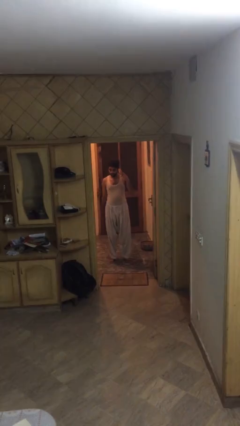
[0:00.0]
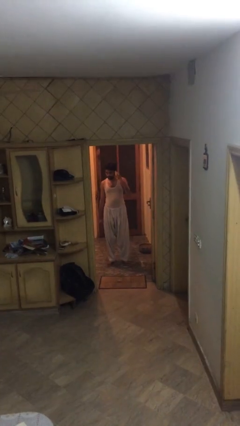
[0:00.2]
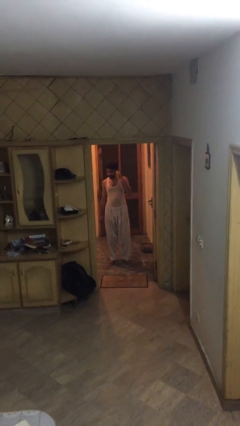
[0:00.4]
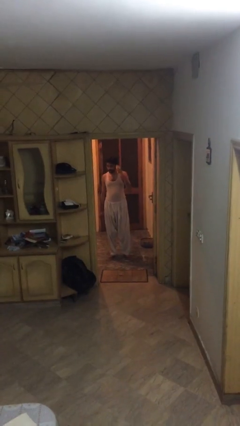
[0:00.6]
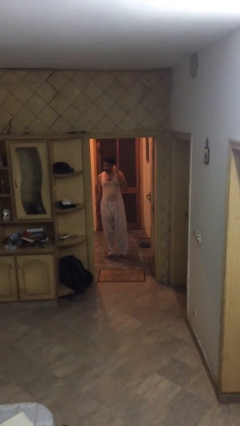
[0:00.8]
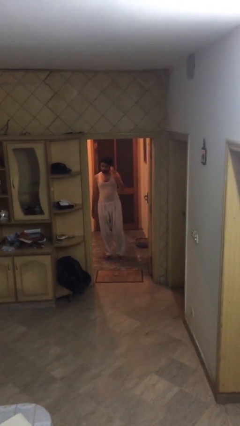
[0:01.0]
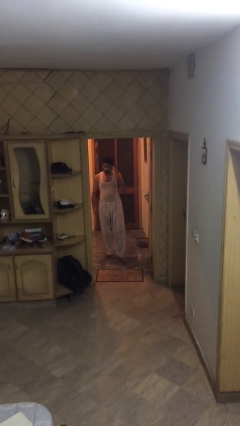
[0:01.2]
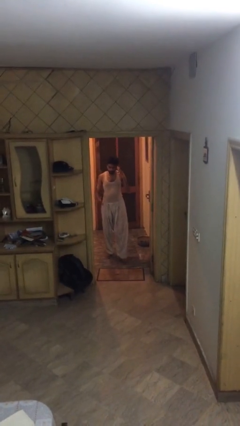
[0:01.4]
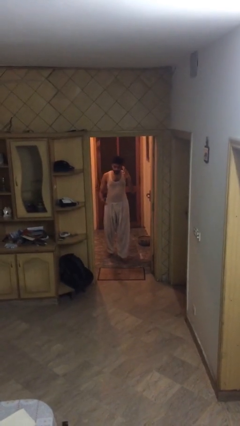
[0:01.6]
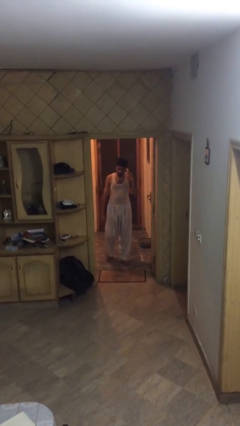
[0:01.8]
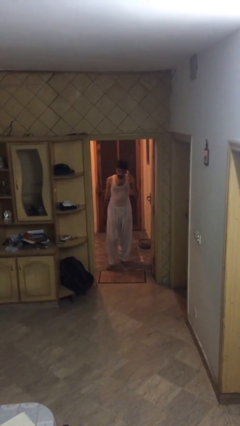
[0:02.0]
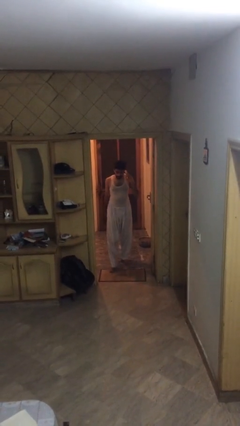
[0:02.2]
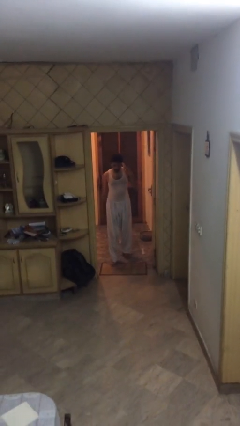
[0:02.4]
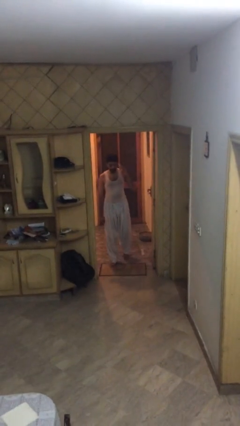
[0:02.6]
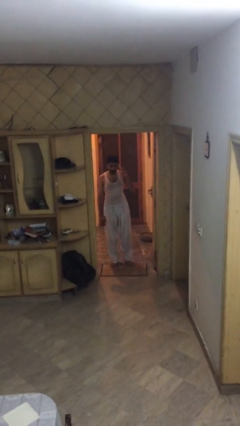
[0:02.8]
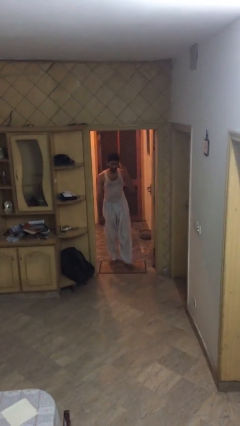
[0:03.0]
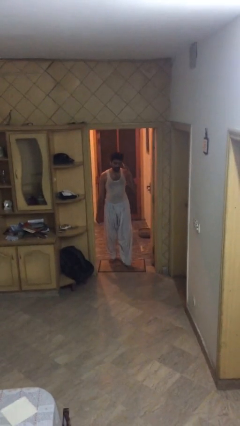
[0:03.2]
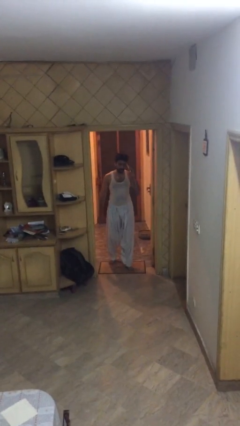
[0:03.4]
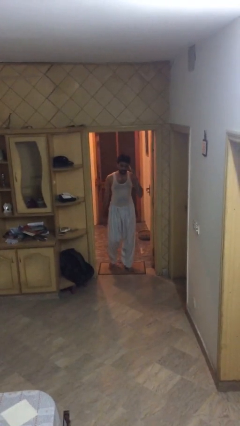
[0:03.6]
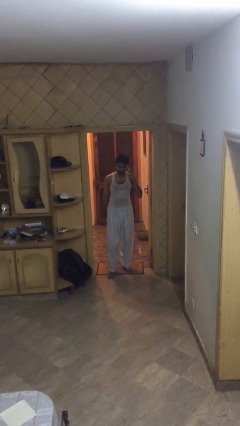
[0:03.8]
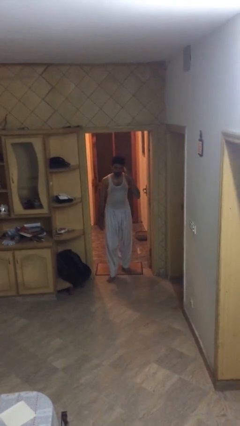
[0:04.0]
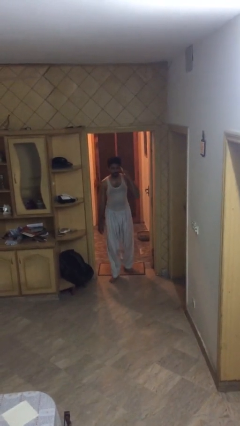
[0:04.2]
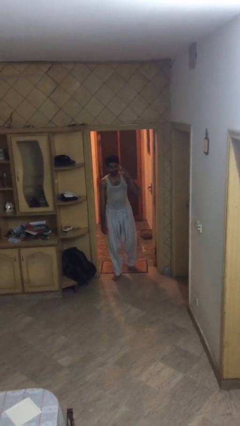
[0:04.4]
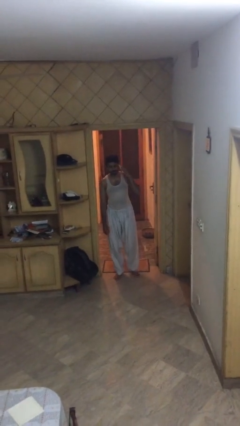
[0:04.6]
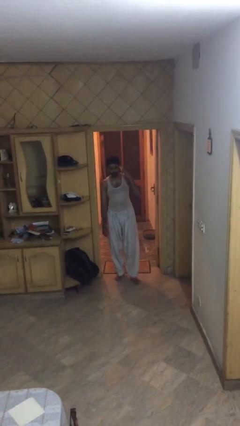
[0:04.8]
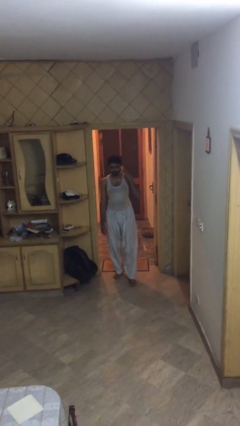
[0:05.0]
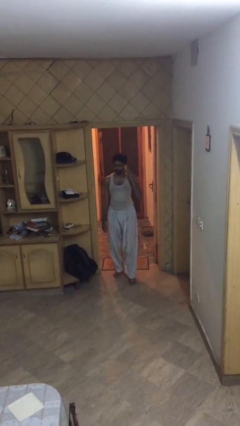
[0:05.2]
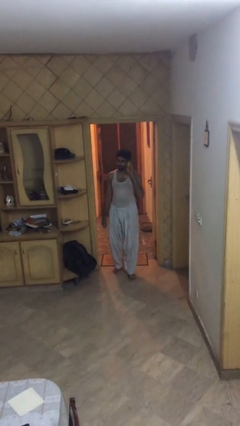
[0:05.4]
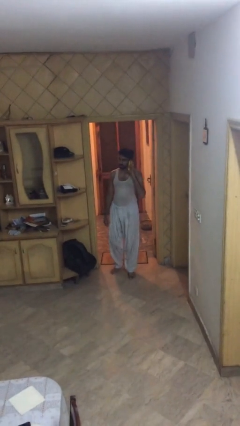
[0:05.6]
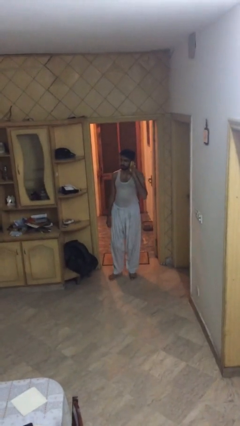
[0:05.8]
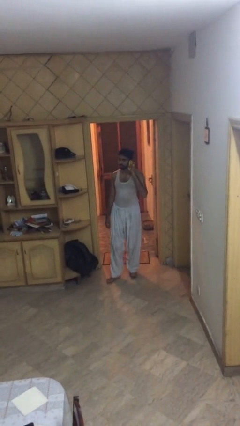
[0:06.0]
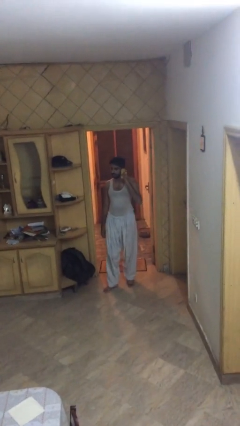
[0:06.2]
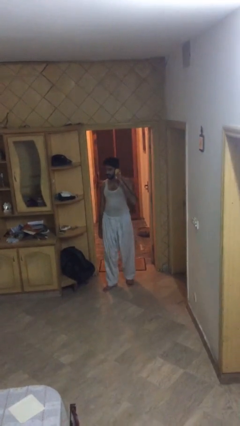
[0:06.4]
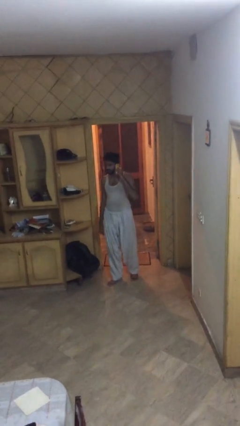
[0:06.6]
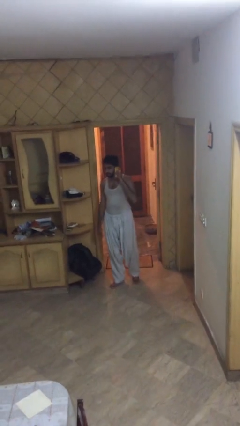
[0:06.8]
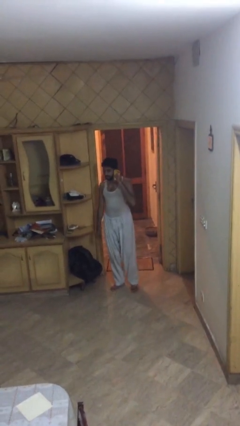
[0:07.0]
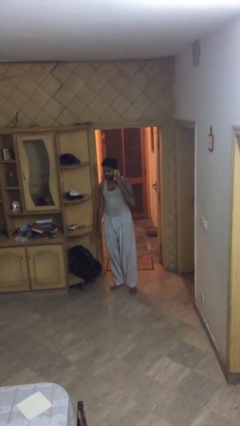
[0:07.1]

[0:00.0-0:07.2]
person enters scene through structure

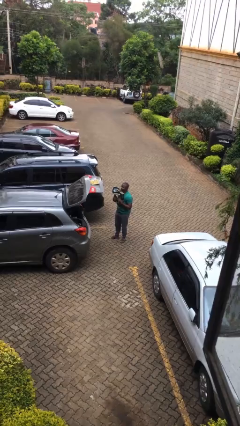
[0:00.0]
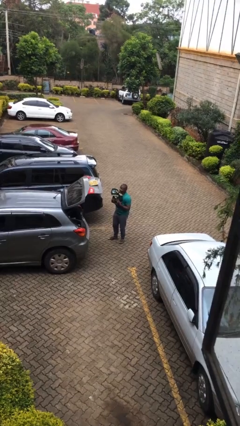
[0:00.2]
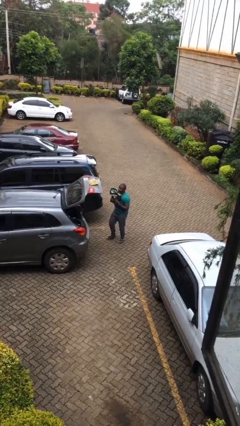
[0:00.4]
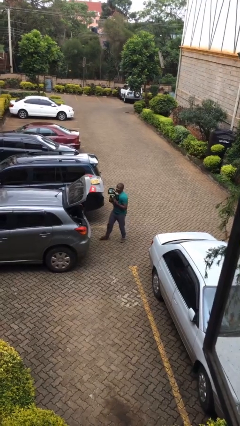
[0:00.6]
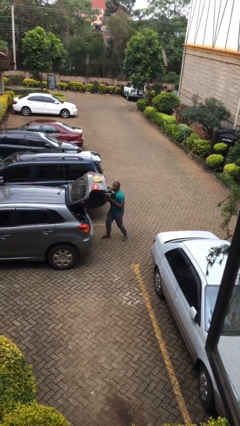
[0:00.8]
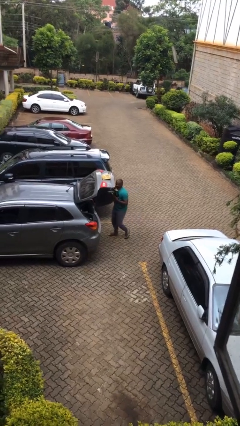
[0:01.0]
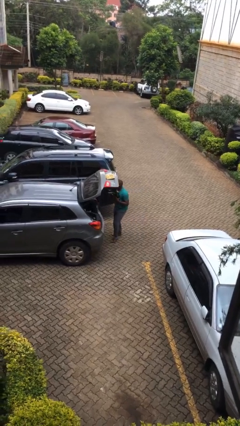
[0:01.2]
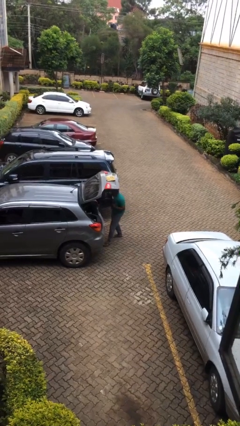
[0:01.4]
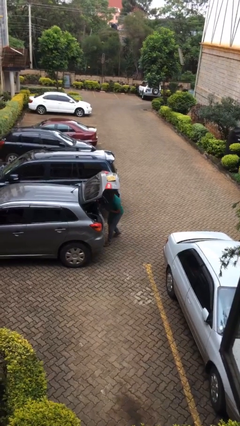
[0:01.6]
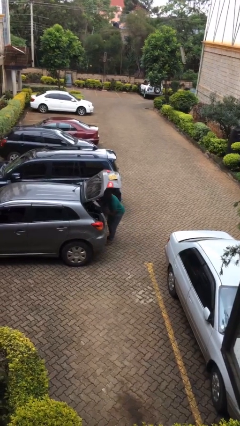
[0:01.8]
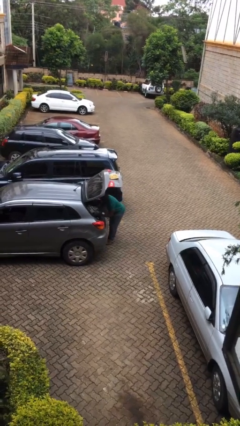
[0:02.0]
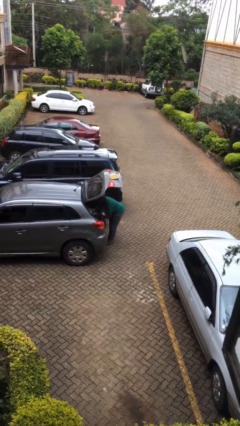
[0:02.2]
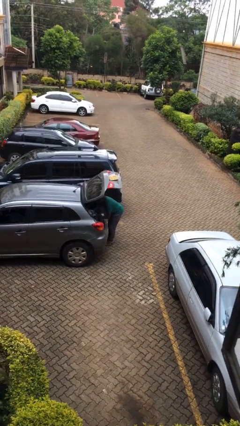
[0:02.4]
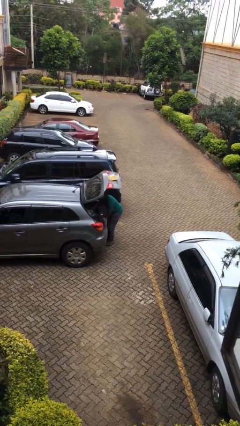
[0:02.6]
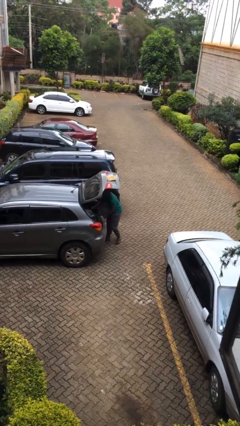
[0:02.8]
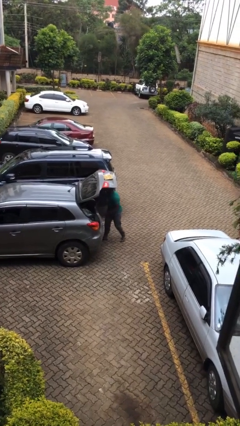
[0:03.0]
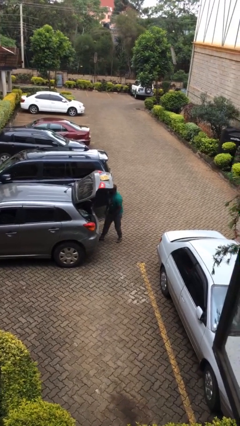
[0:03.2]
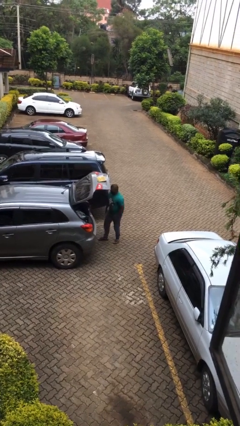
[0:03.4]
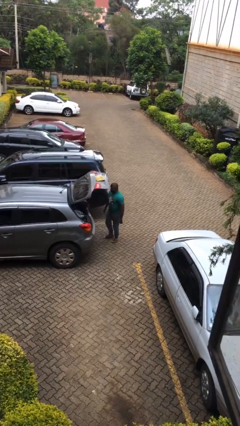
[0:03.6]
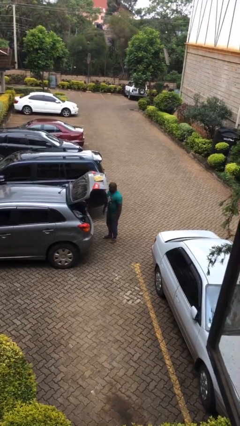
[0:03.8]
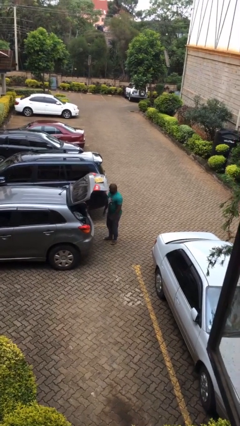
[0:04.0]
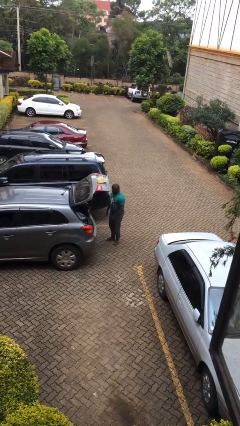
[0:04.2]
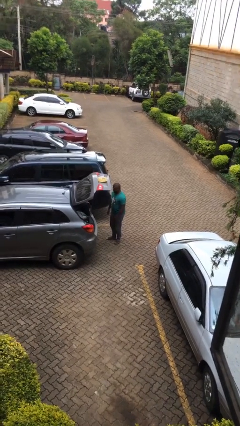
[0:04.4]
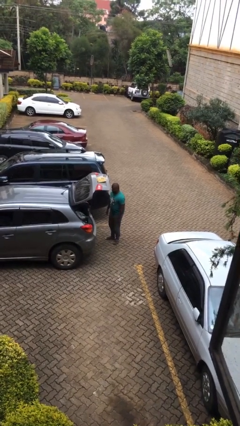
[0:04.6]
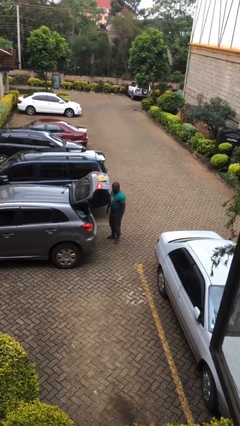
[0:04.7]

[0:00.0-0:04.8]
person loads car

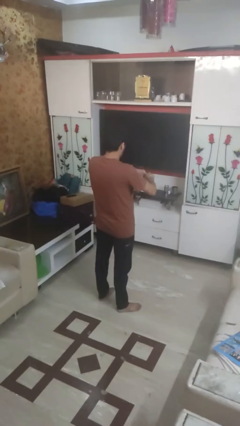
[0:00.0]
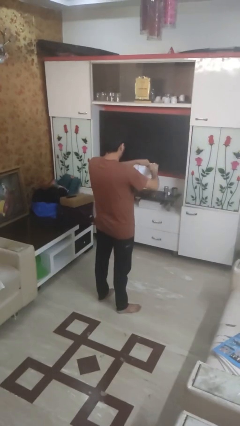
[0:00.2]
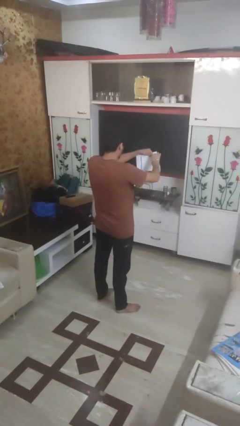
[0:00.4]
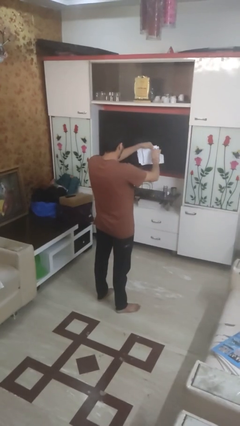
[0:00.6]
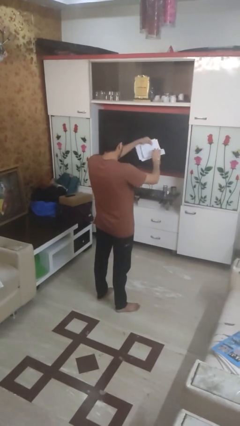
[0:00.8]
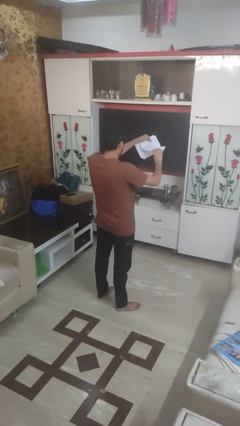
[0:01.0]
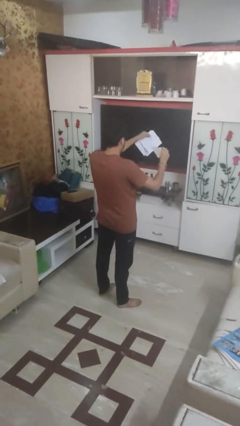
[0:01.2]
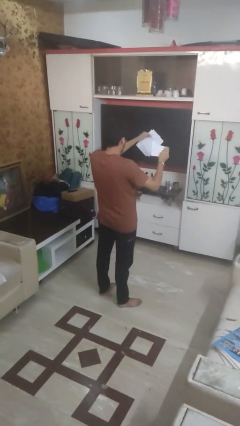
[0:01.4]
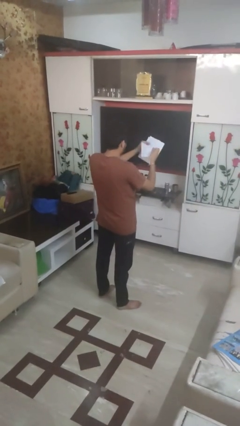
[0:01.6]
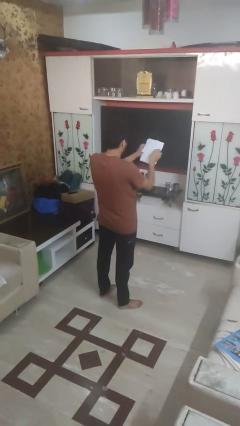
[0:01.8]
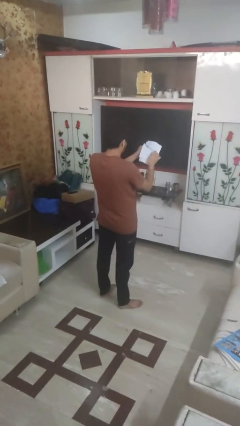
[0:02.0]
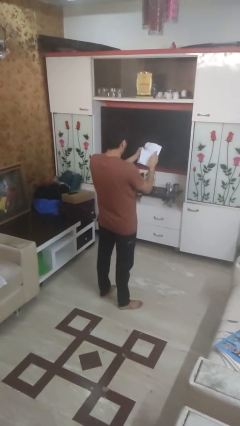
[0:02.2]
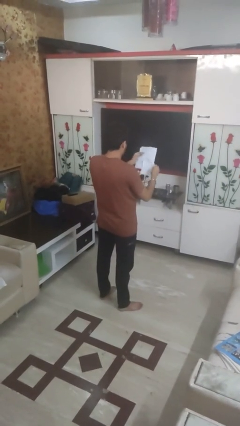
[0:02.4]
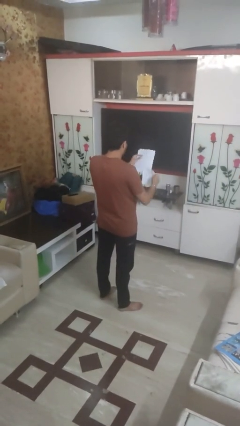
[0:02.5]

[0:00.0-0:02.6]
person tears paper

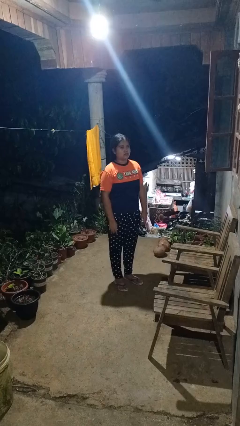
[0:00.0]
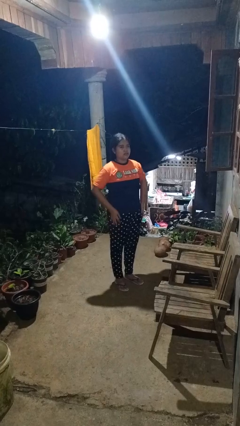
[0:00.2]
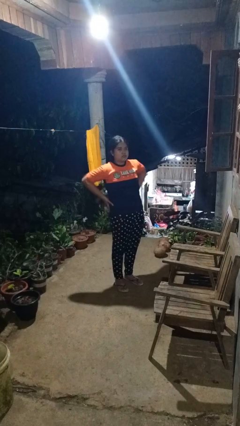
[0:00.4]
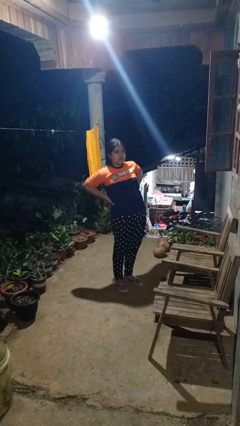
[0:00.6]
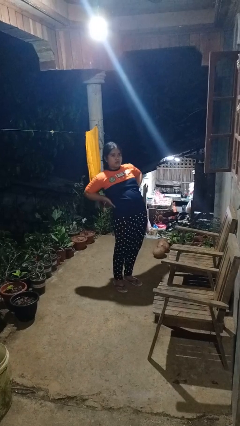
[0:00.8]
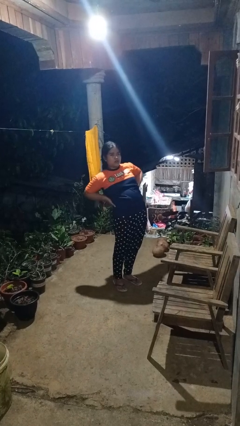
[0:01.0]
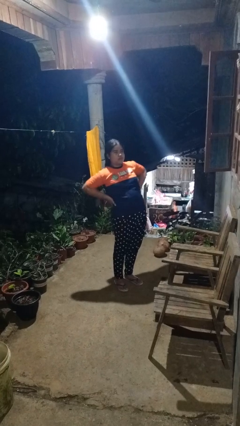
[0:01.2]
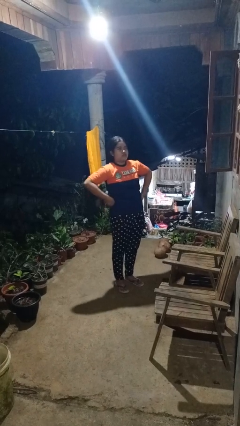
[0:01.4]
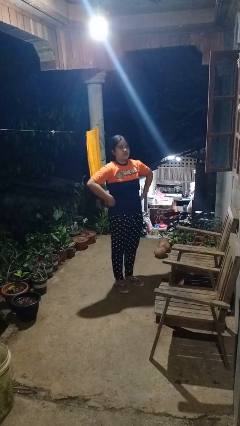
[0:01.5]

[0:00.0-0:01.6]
person stretches back

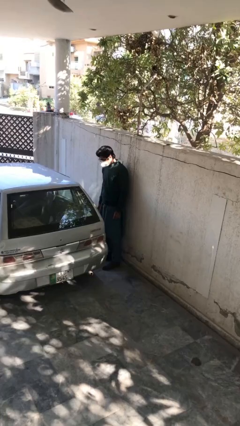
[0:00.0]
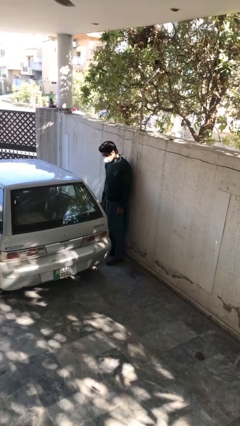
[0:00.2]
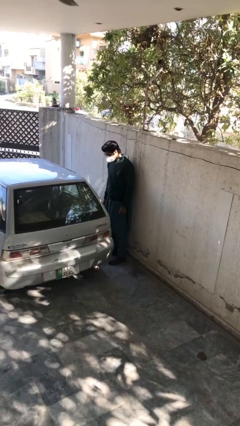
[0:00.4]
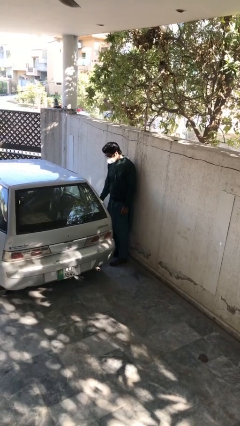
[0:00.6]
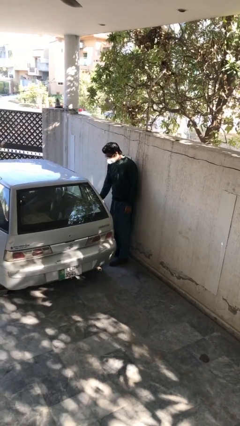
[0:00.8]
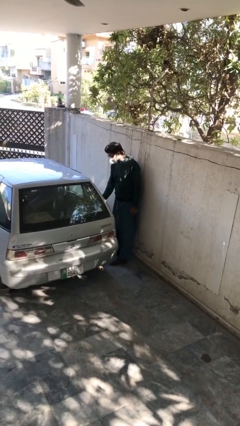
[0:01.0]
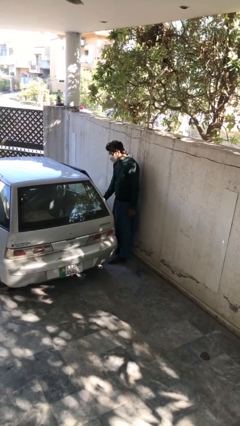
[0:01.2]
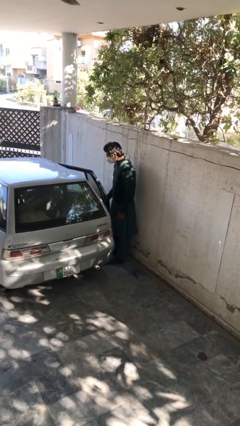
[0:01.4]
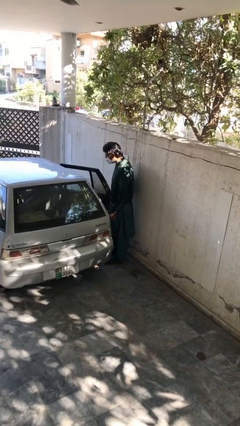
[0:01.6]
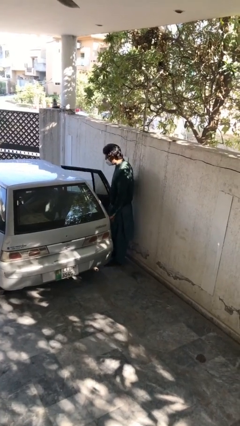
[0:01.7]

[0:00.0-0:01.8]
person opens car door
